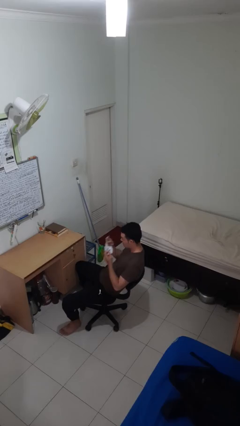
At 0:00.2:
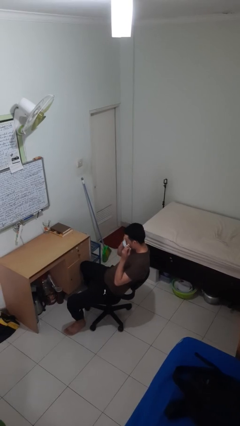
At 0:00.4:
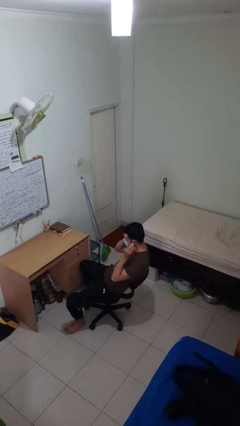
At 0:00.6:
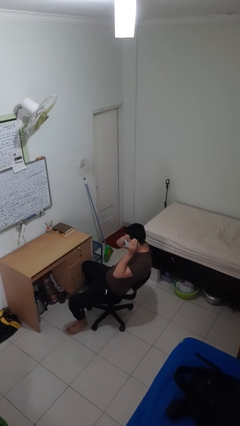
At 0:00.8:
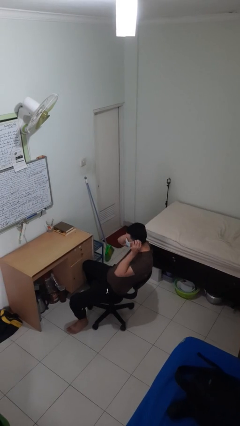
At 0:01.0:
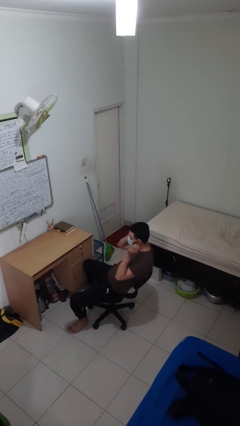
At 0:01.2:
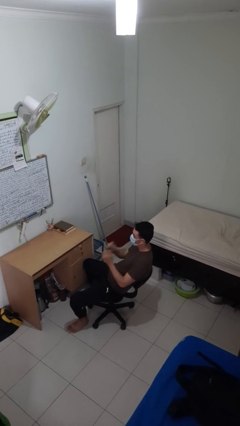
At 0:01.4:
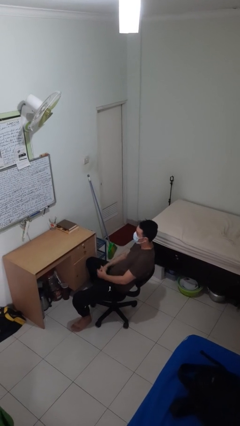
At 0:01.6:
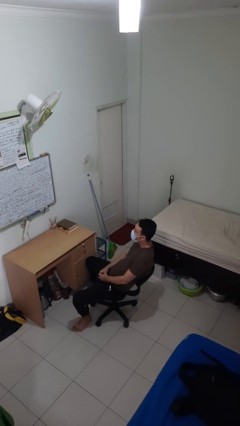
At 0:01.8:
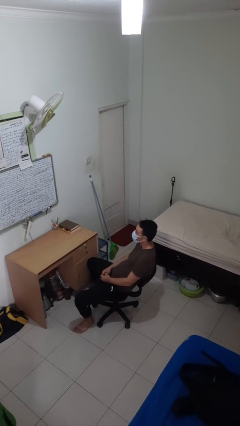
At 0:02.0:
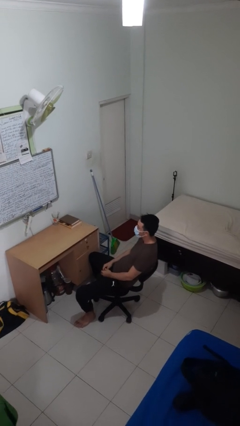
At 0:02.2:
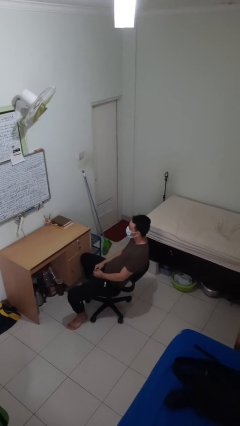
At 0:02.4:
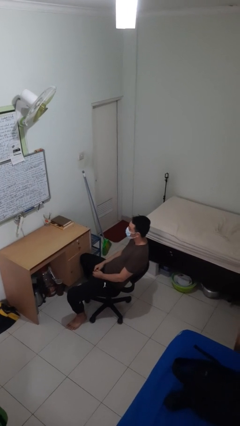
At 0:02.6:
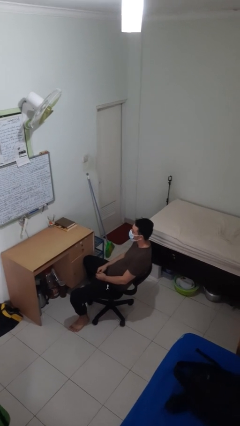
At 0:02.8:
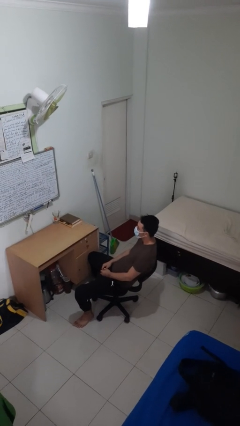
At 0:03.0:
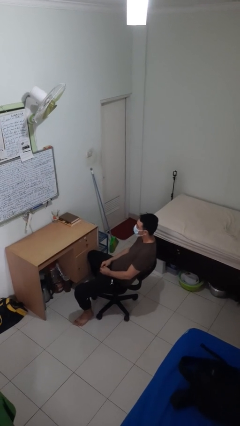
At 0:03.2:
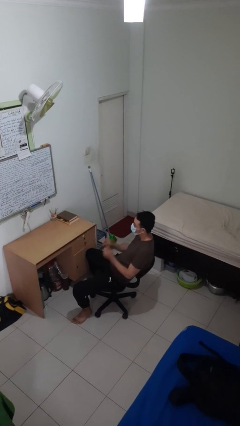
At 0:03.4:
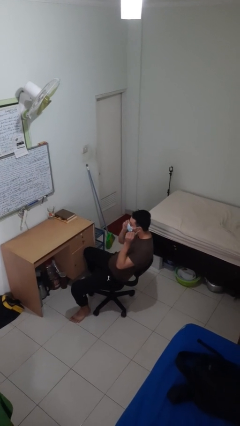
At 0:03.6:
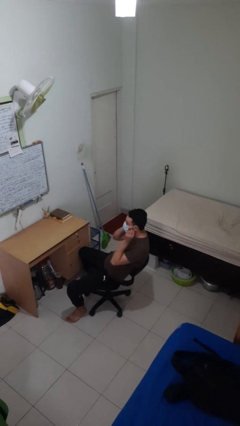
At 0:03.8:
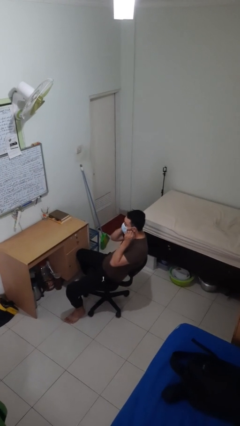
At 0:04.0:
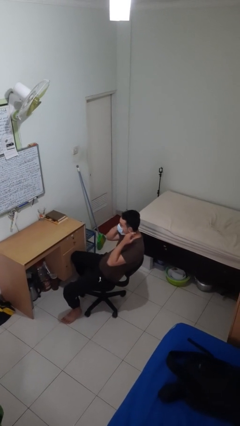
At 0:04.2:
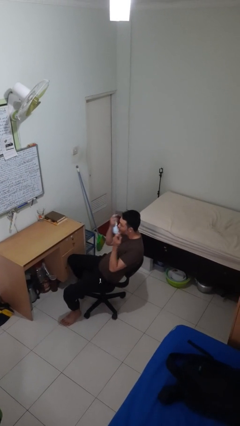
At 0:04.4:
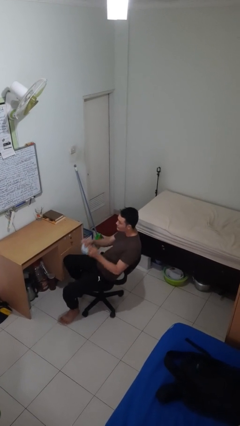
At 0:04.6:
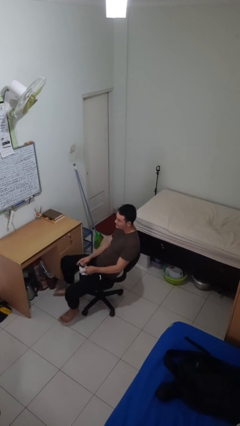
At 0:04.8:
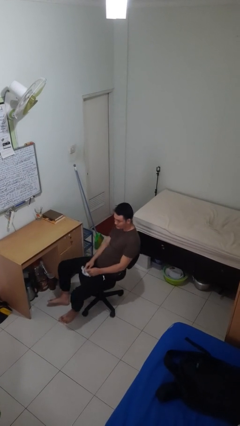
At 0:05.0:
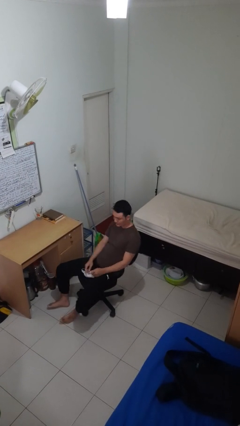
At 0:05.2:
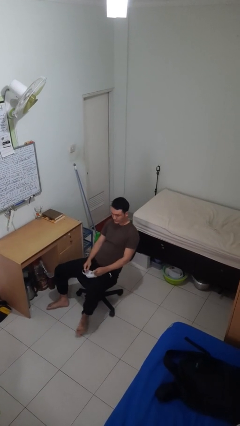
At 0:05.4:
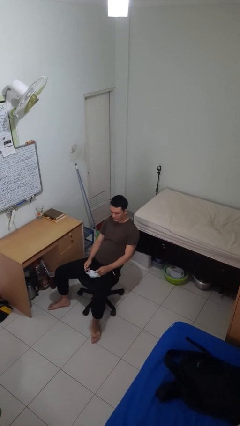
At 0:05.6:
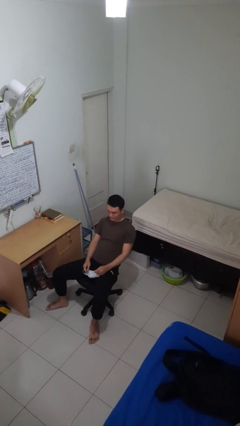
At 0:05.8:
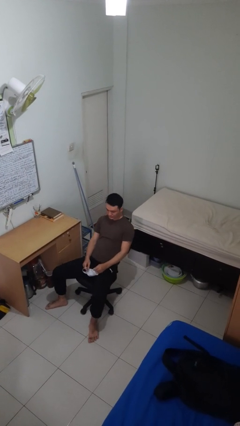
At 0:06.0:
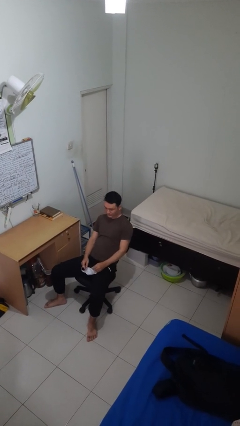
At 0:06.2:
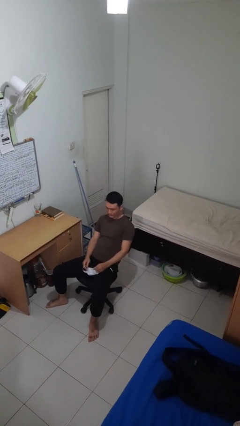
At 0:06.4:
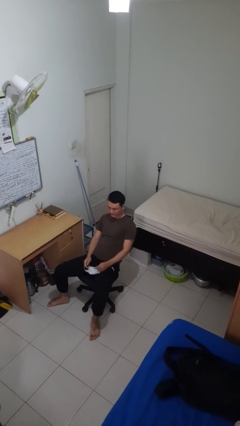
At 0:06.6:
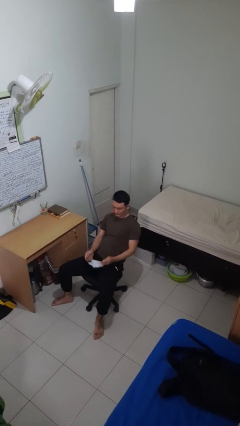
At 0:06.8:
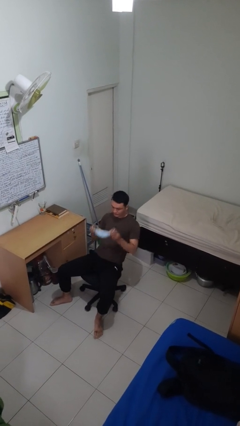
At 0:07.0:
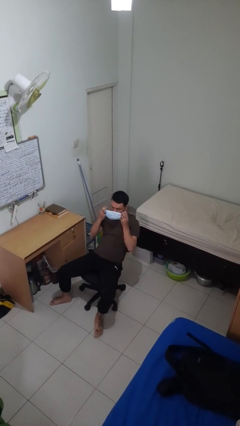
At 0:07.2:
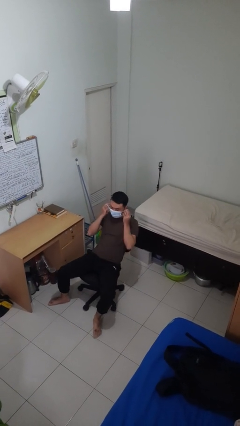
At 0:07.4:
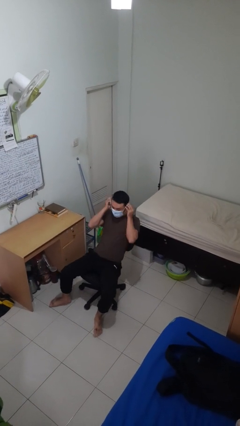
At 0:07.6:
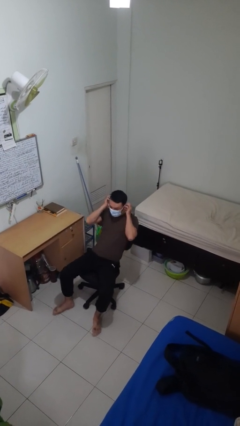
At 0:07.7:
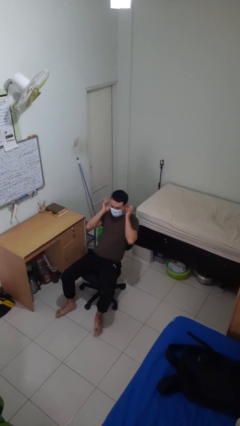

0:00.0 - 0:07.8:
person puts on facemask

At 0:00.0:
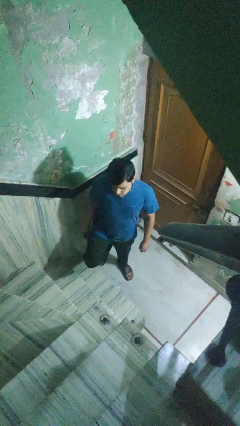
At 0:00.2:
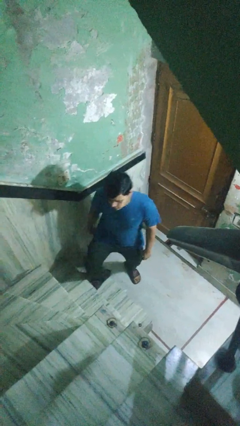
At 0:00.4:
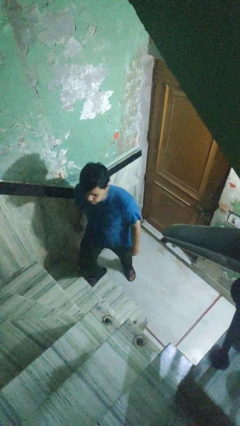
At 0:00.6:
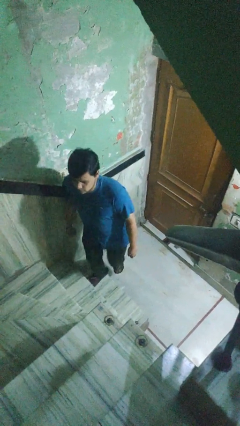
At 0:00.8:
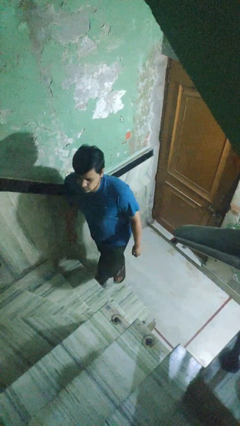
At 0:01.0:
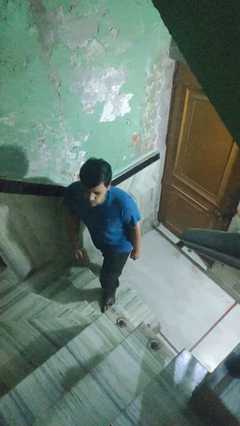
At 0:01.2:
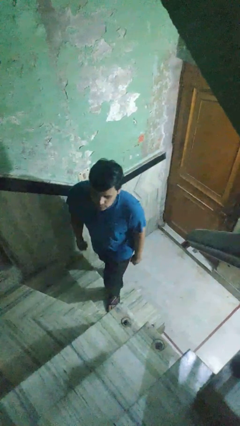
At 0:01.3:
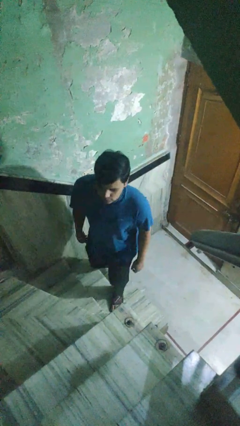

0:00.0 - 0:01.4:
person climbs up stairs

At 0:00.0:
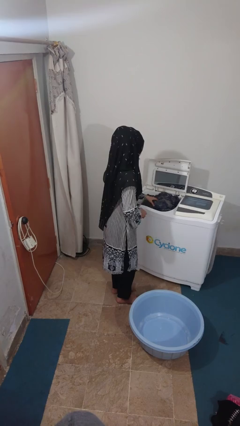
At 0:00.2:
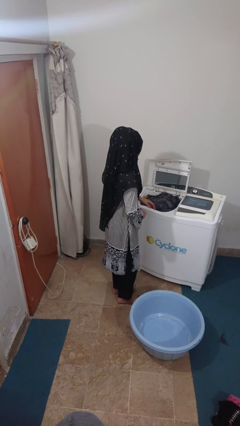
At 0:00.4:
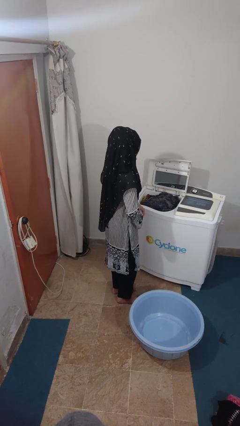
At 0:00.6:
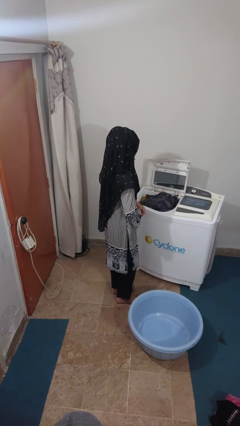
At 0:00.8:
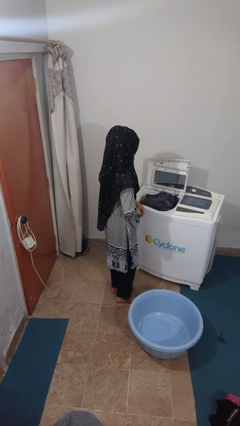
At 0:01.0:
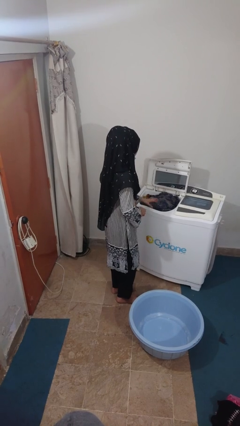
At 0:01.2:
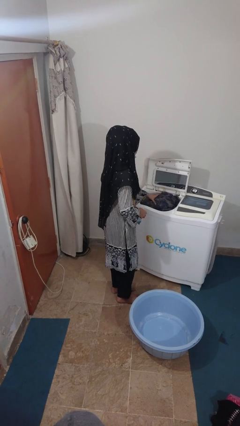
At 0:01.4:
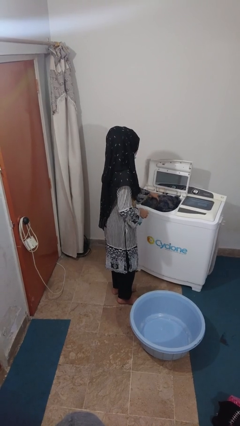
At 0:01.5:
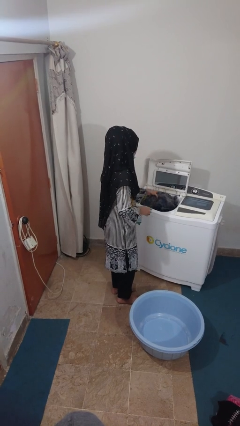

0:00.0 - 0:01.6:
person loads clotheswasher

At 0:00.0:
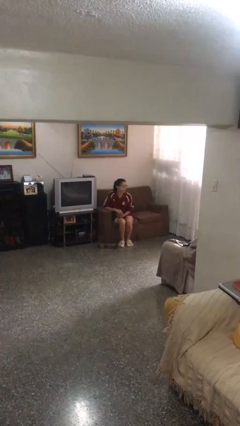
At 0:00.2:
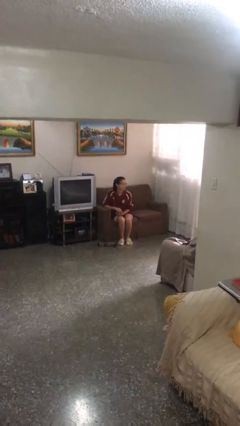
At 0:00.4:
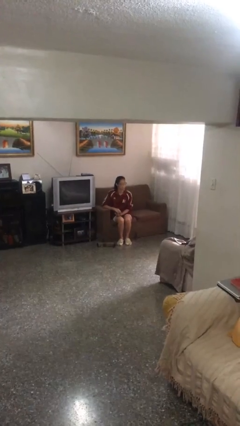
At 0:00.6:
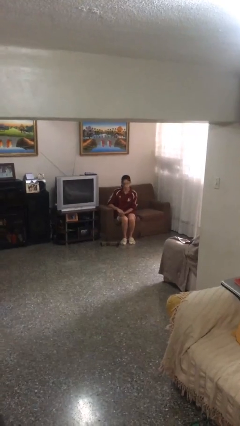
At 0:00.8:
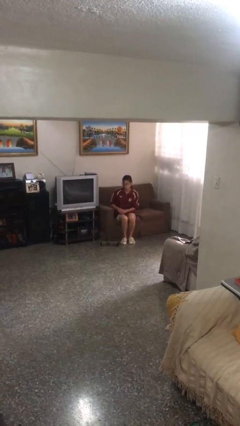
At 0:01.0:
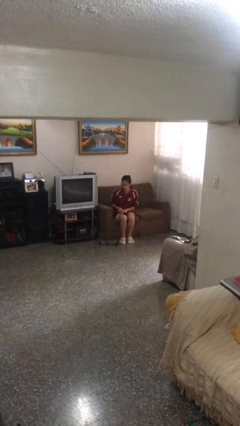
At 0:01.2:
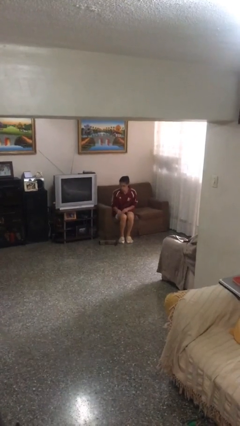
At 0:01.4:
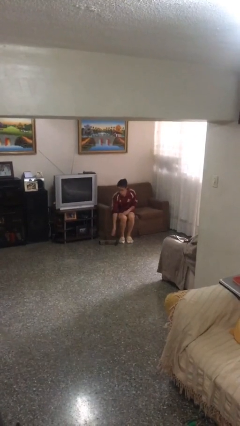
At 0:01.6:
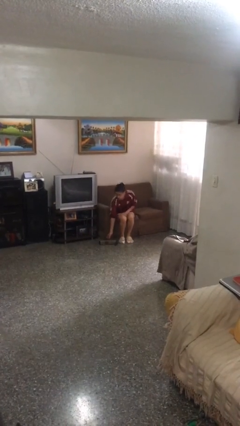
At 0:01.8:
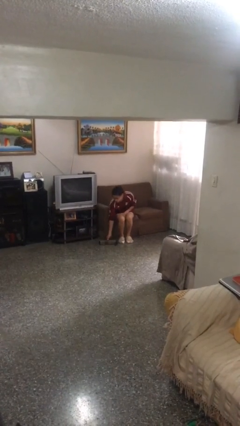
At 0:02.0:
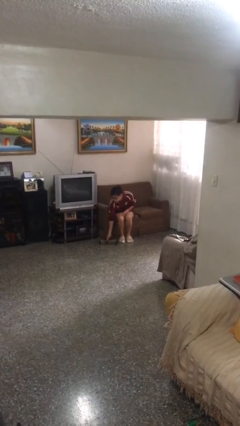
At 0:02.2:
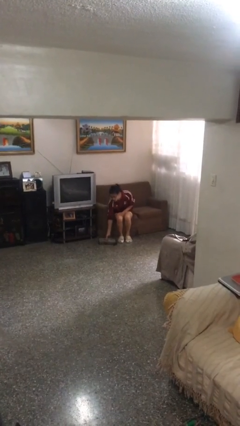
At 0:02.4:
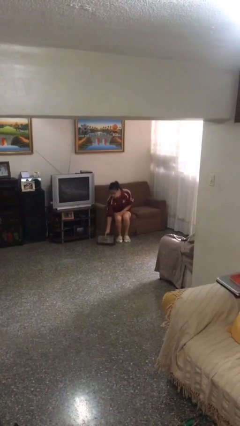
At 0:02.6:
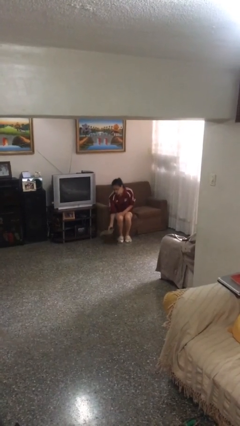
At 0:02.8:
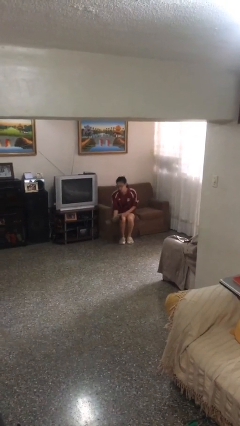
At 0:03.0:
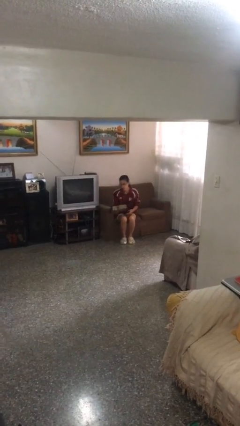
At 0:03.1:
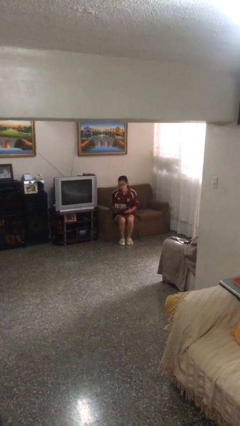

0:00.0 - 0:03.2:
person picks up object from floor

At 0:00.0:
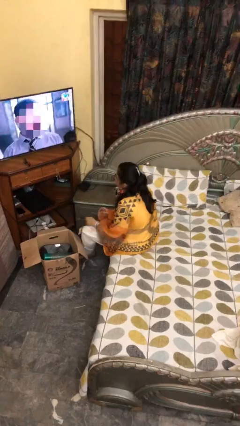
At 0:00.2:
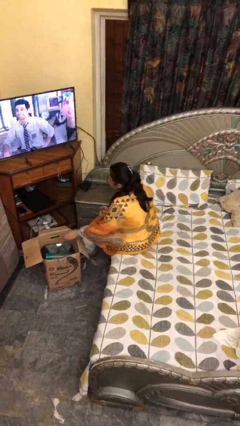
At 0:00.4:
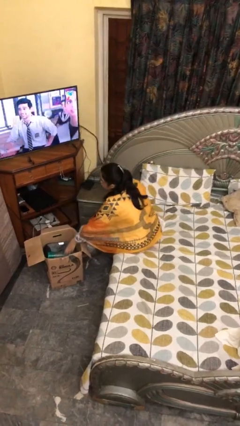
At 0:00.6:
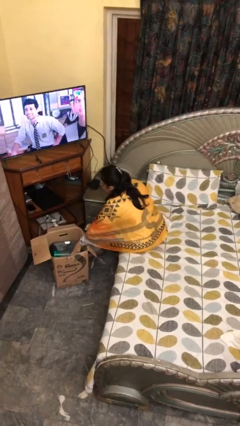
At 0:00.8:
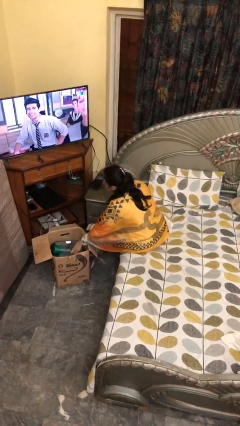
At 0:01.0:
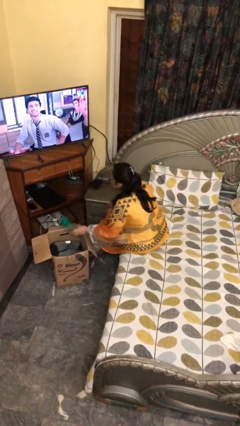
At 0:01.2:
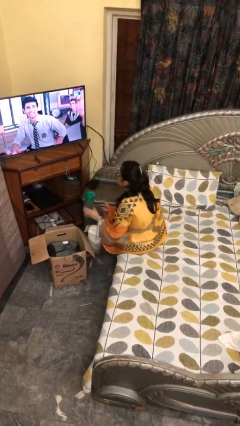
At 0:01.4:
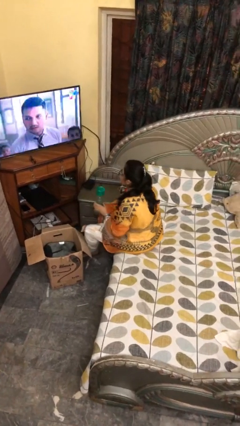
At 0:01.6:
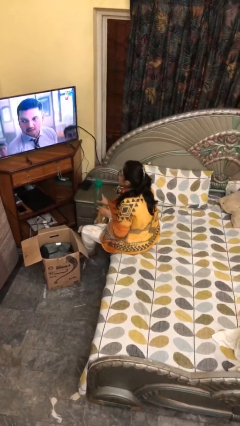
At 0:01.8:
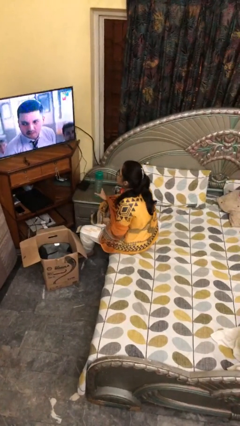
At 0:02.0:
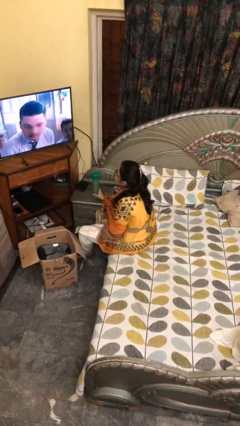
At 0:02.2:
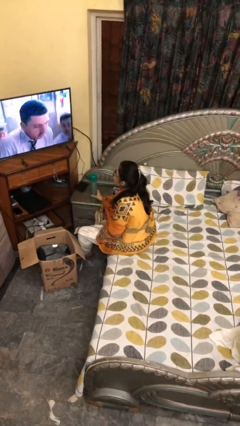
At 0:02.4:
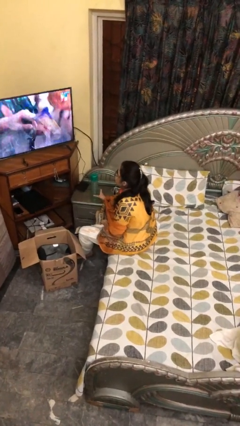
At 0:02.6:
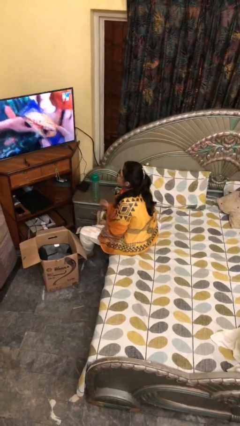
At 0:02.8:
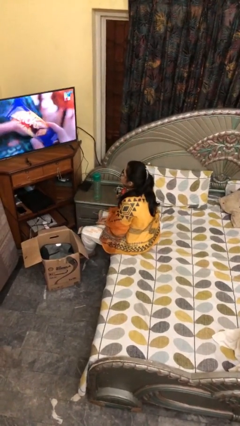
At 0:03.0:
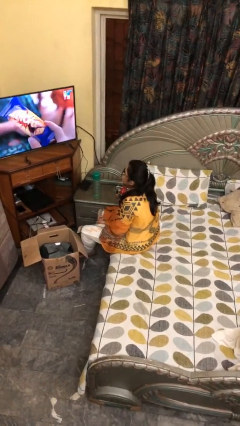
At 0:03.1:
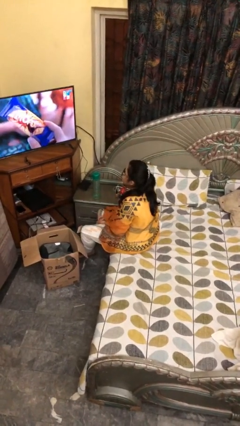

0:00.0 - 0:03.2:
person takes object from box
